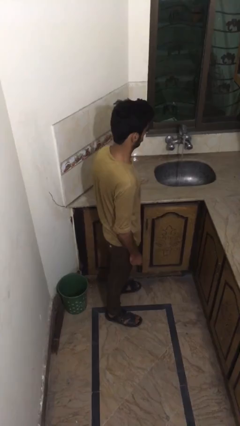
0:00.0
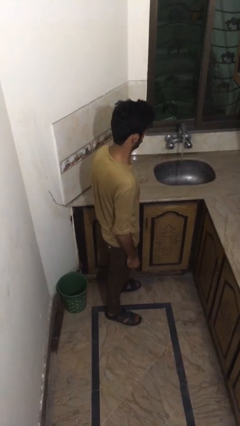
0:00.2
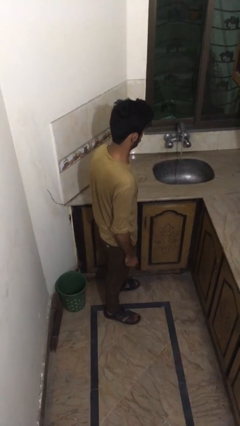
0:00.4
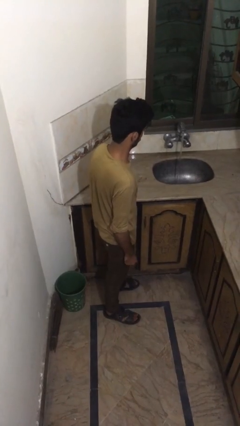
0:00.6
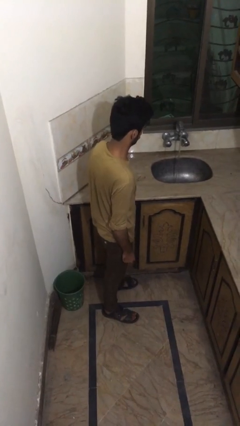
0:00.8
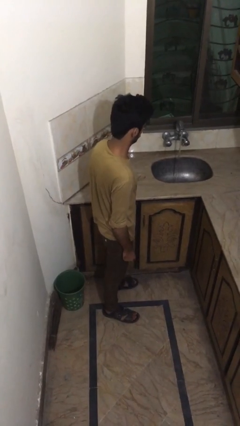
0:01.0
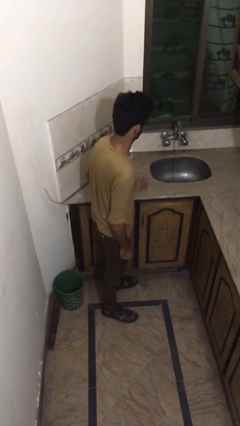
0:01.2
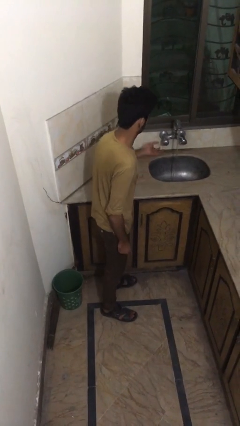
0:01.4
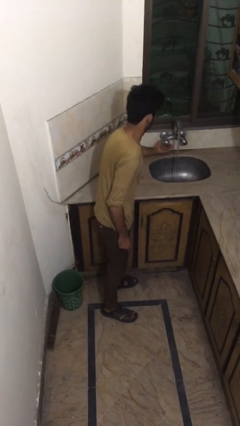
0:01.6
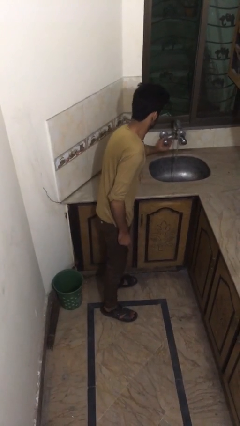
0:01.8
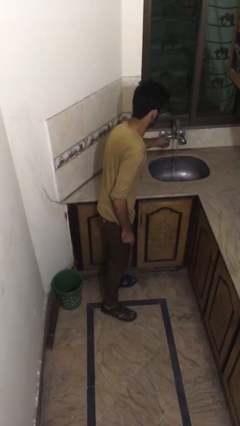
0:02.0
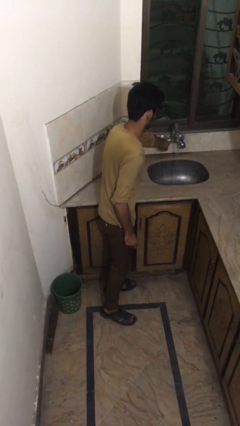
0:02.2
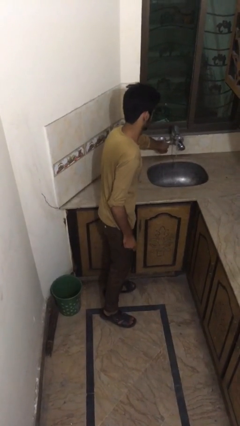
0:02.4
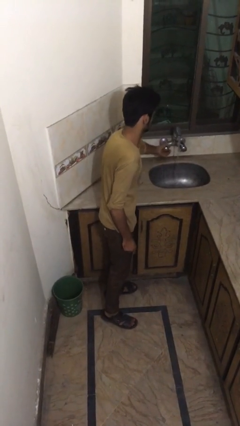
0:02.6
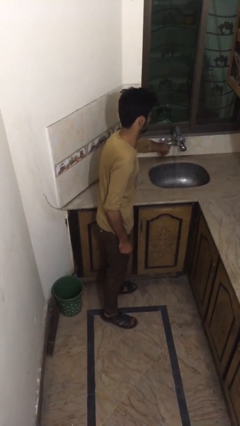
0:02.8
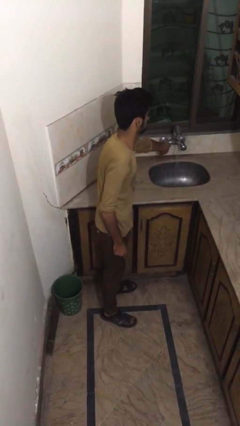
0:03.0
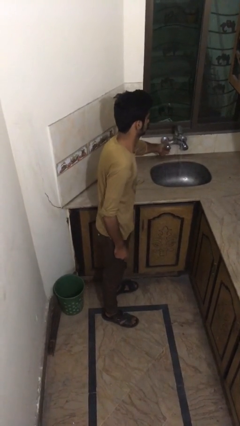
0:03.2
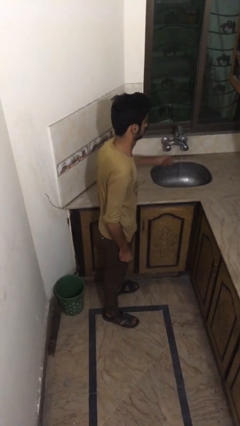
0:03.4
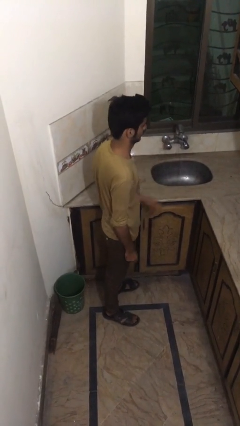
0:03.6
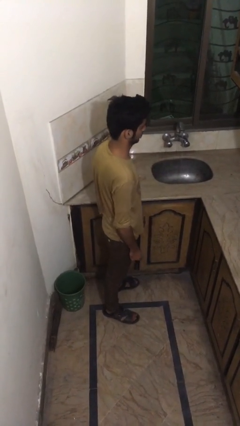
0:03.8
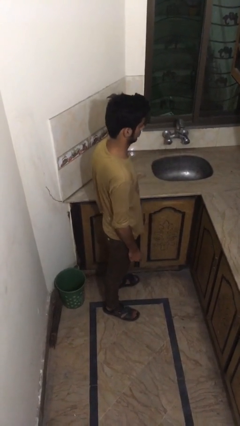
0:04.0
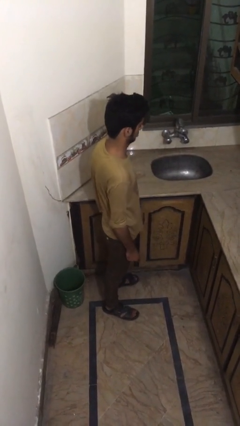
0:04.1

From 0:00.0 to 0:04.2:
person turns off faucet

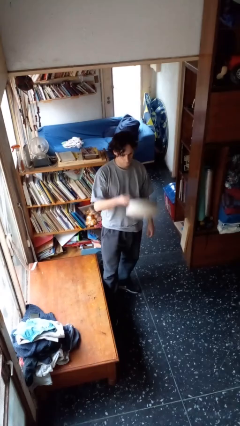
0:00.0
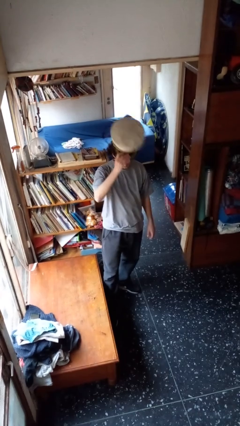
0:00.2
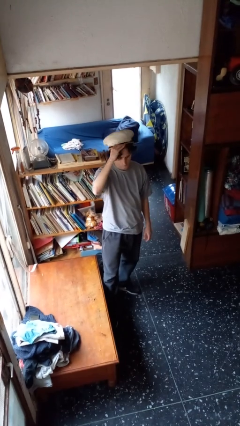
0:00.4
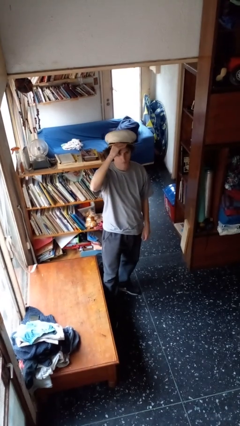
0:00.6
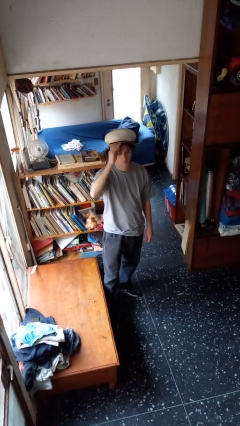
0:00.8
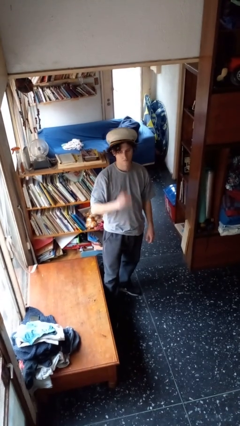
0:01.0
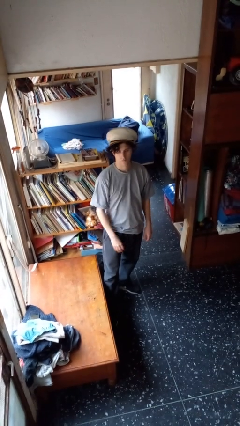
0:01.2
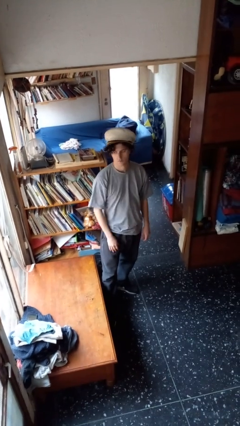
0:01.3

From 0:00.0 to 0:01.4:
person puts on hat

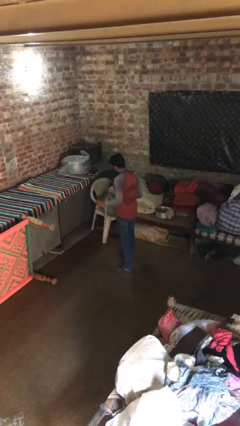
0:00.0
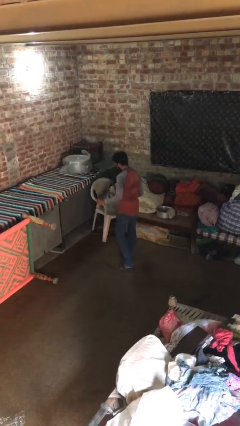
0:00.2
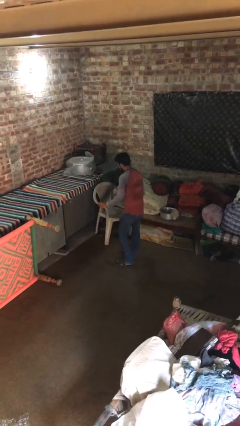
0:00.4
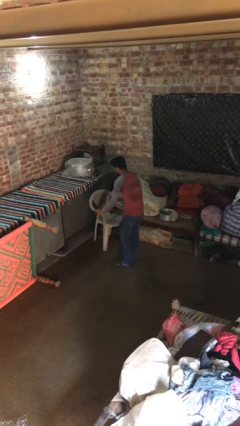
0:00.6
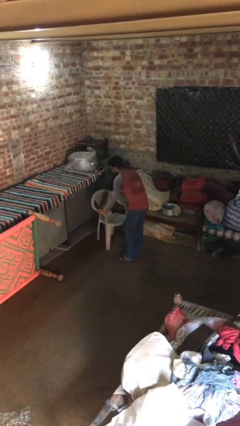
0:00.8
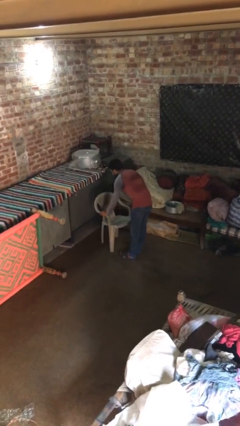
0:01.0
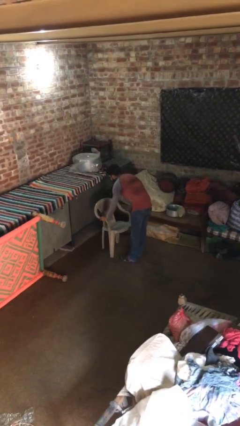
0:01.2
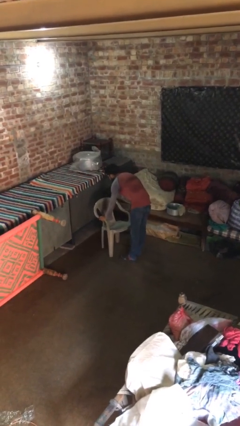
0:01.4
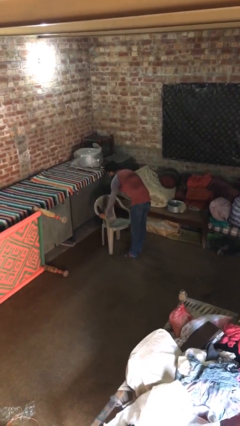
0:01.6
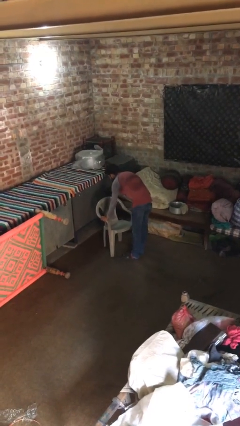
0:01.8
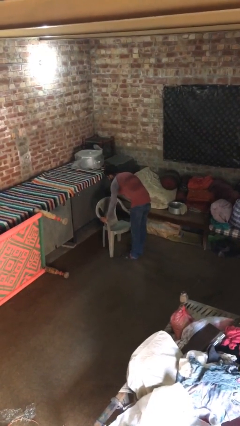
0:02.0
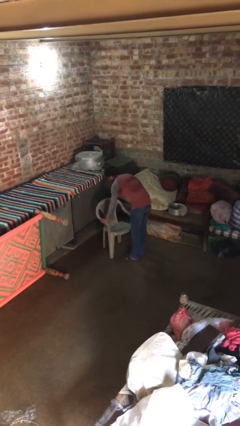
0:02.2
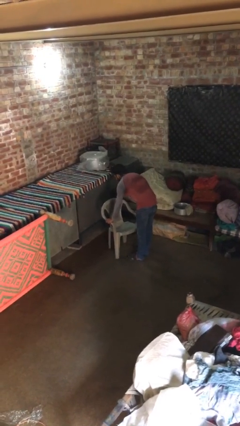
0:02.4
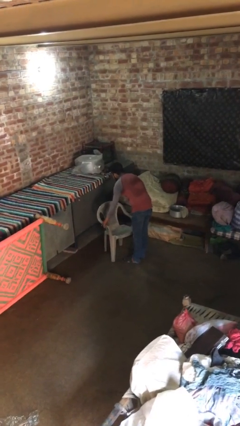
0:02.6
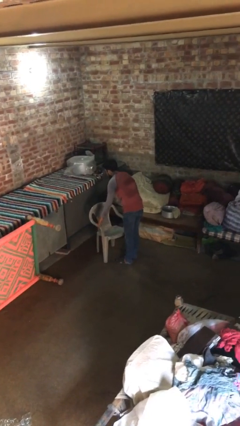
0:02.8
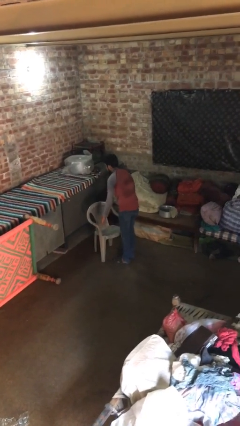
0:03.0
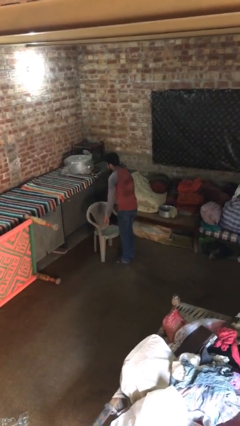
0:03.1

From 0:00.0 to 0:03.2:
person puts down object on floor

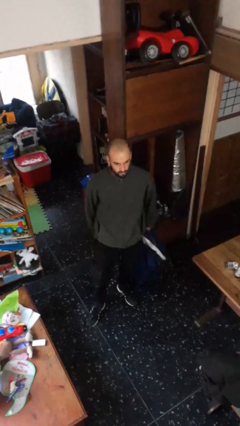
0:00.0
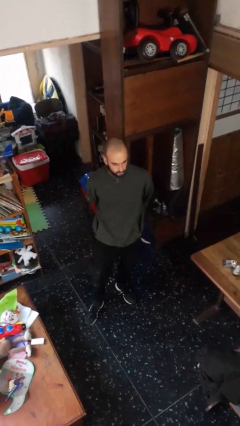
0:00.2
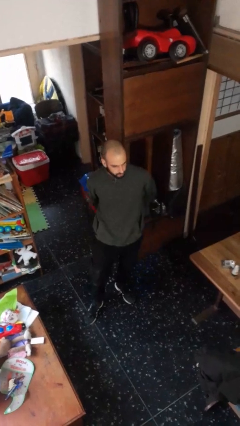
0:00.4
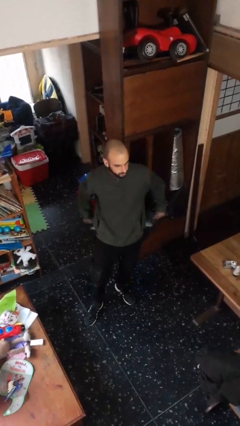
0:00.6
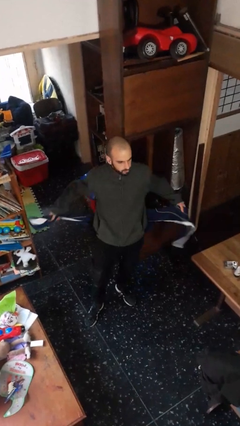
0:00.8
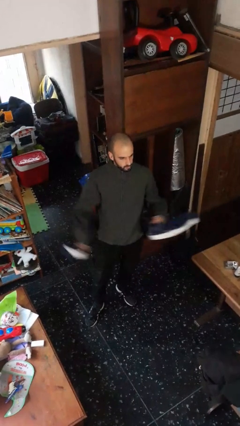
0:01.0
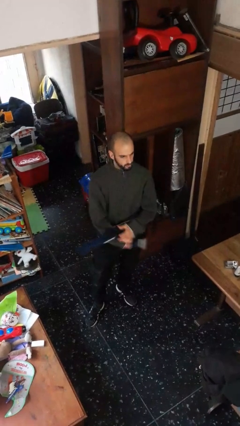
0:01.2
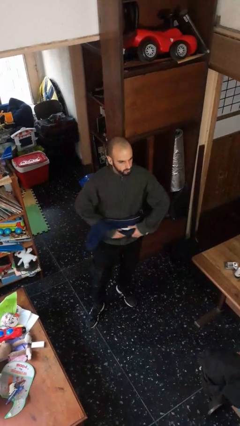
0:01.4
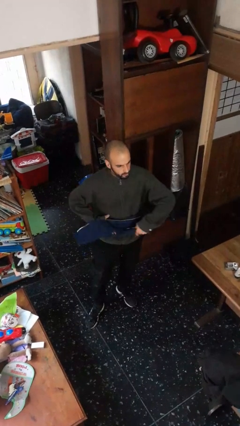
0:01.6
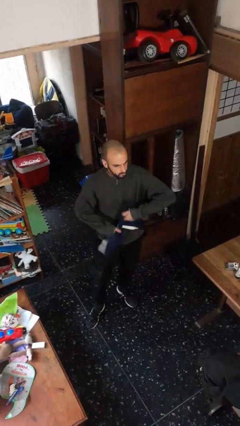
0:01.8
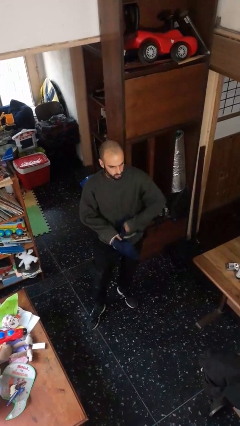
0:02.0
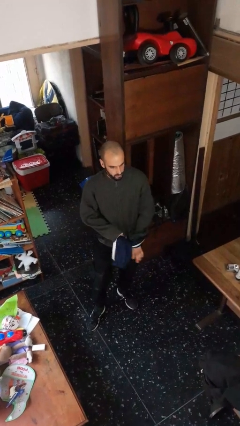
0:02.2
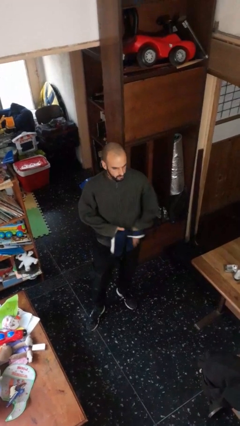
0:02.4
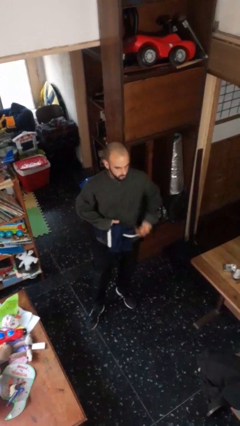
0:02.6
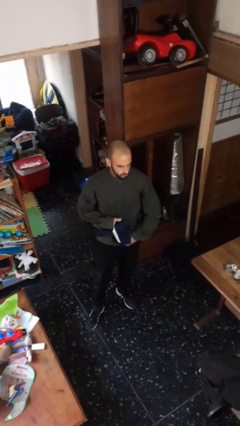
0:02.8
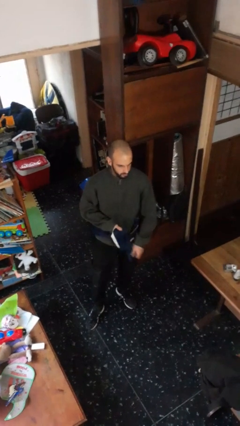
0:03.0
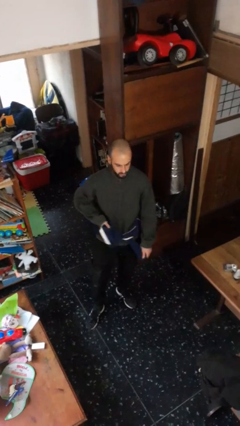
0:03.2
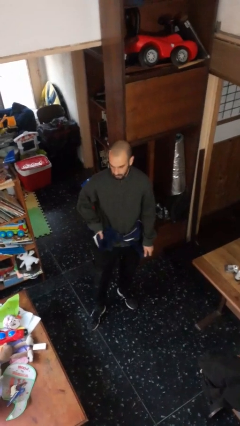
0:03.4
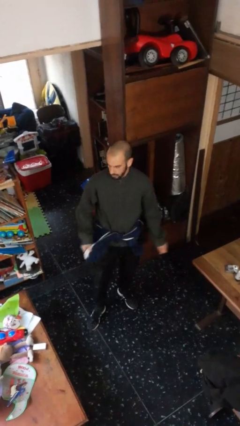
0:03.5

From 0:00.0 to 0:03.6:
person ties jacket around waist

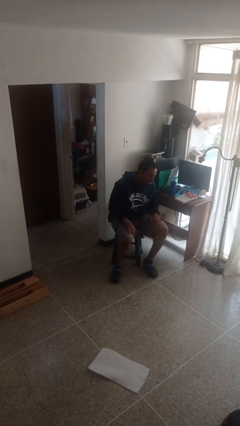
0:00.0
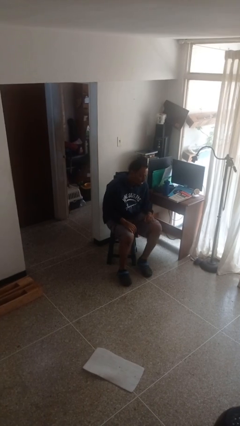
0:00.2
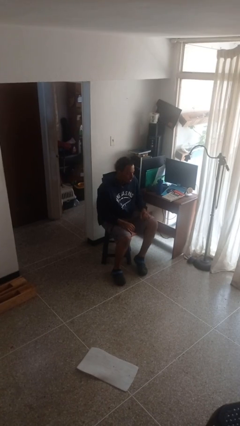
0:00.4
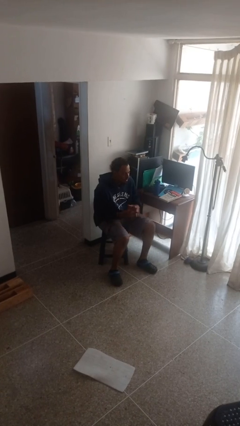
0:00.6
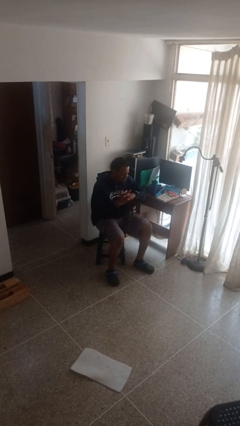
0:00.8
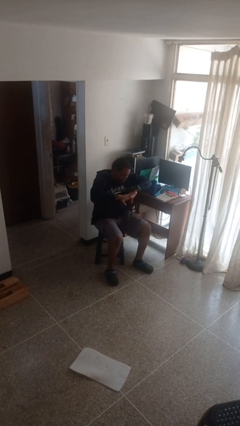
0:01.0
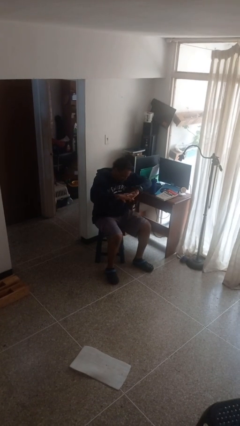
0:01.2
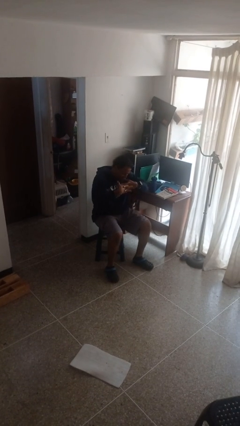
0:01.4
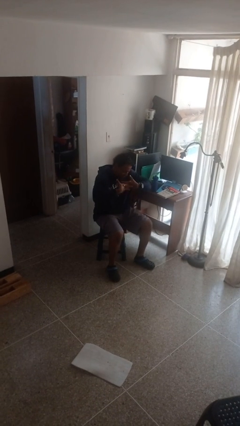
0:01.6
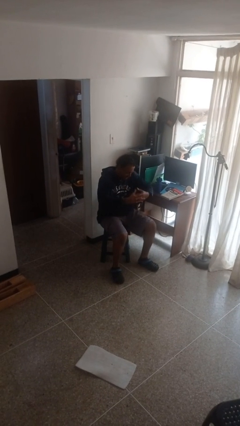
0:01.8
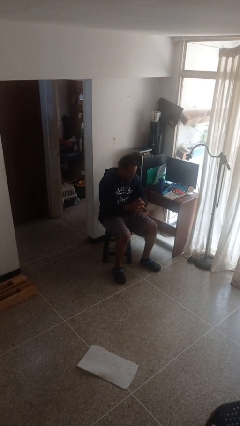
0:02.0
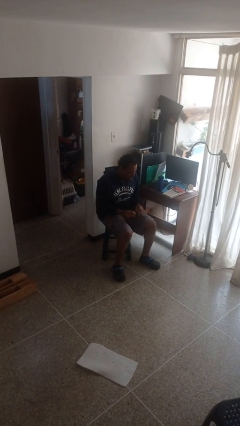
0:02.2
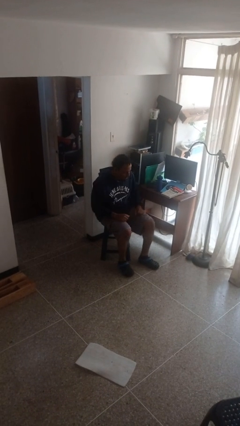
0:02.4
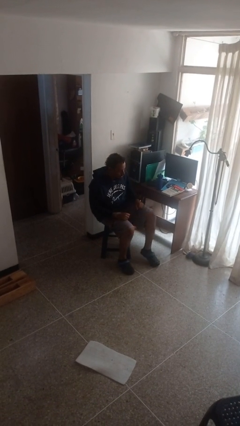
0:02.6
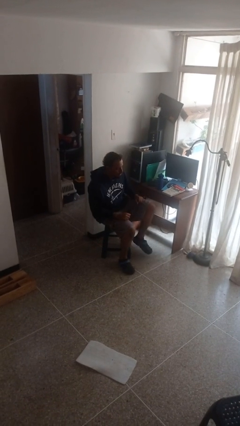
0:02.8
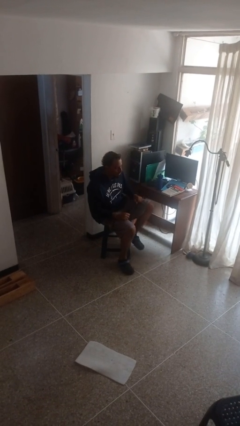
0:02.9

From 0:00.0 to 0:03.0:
person cracks knuckles

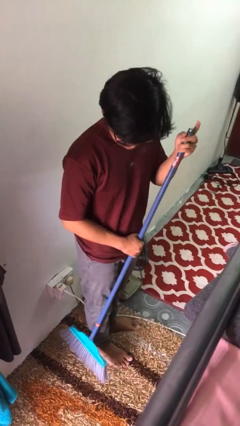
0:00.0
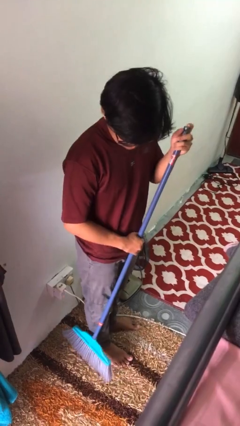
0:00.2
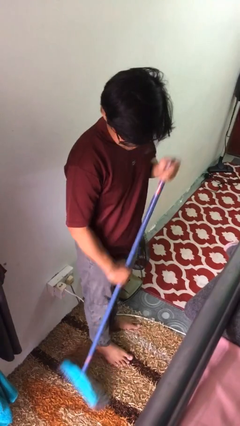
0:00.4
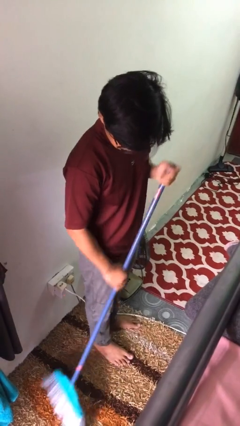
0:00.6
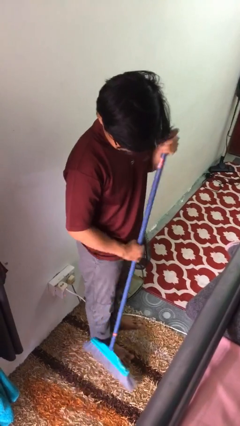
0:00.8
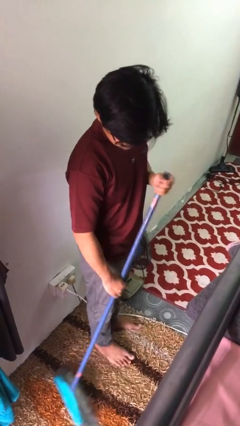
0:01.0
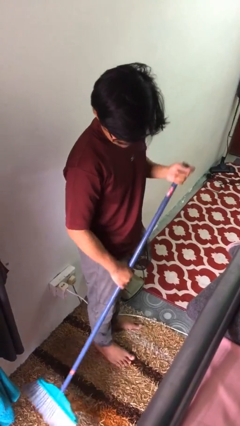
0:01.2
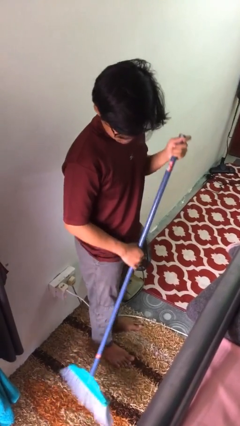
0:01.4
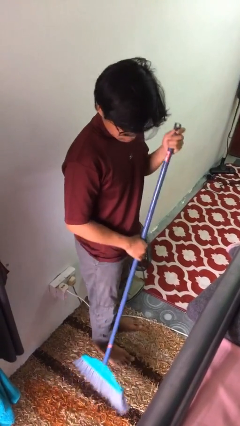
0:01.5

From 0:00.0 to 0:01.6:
person sweeps floor

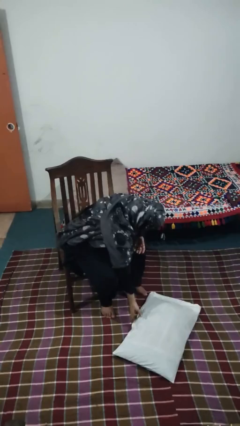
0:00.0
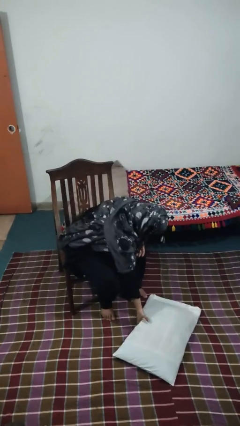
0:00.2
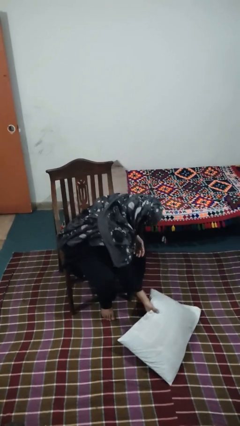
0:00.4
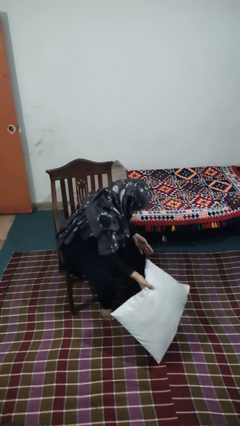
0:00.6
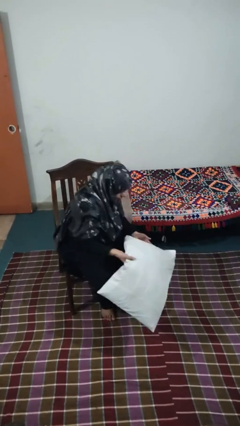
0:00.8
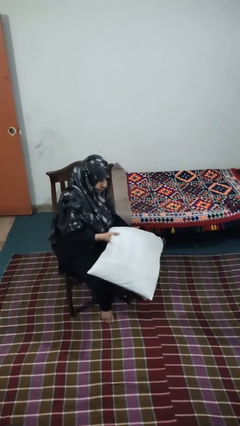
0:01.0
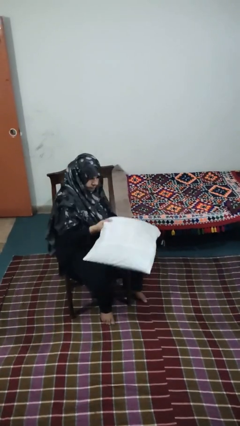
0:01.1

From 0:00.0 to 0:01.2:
person picks up object from floor
